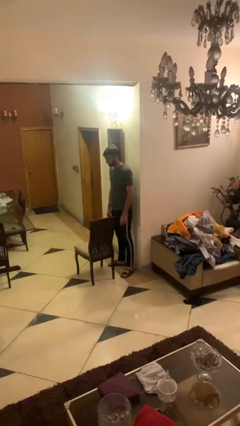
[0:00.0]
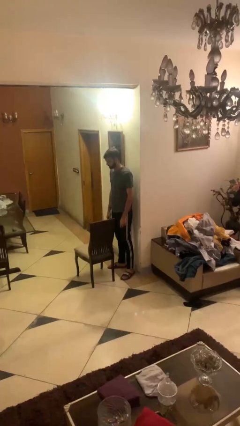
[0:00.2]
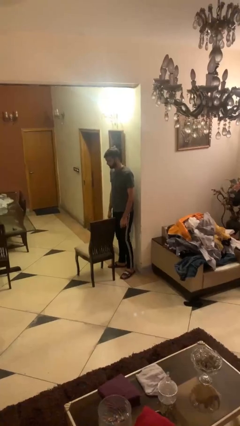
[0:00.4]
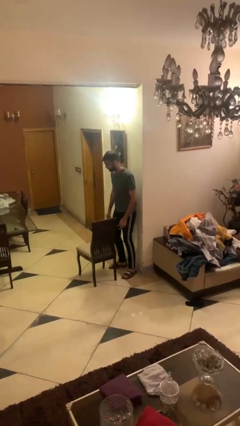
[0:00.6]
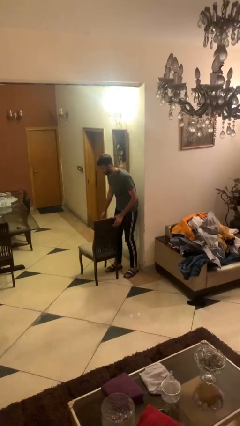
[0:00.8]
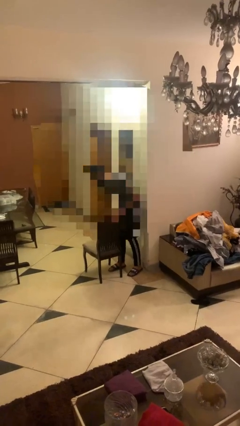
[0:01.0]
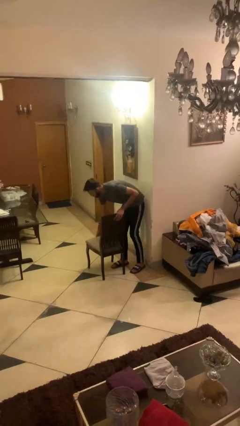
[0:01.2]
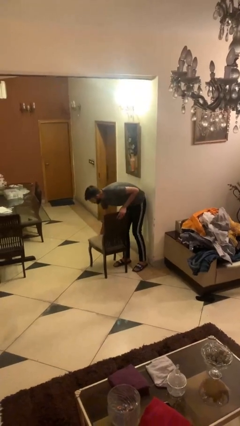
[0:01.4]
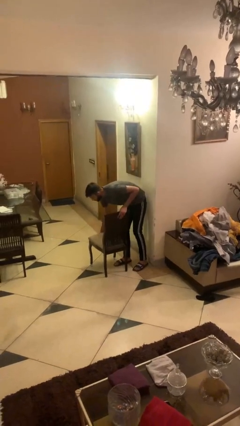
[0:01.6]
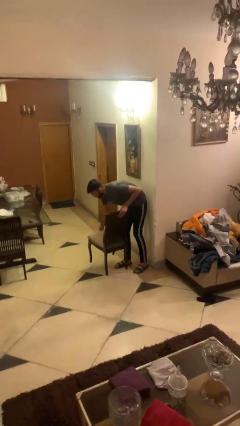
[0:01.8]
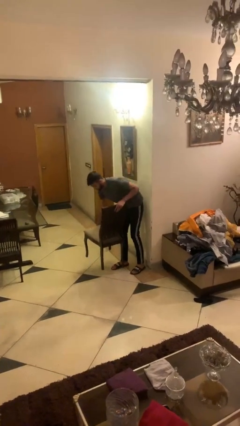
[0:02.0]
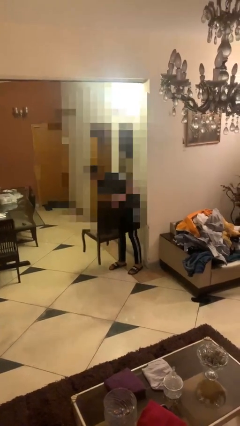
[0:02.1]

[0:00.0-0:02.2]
person picks up object from floor

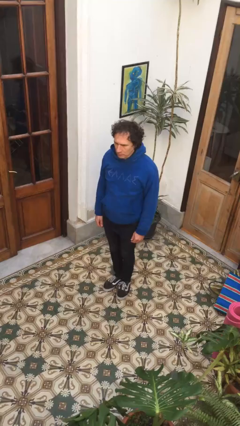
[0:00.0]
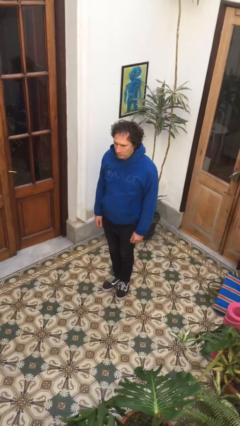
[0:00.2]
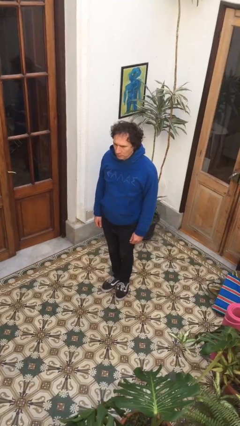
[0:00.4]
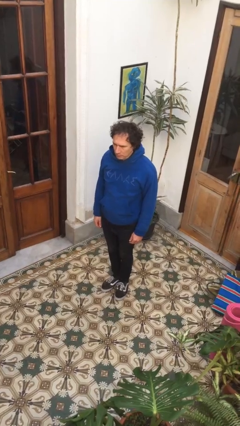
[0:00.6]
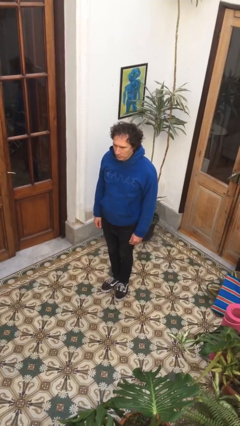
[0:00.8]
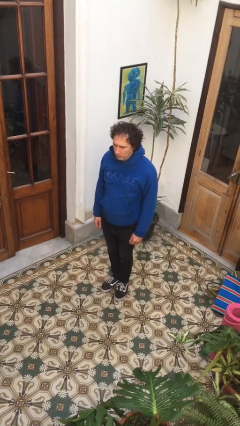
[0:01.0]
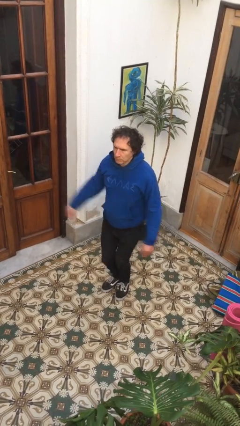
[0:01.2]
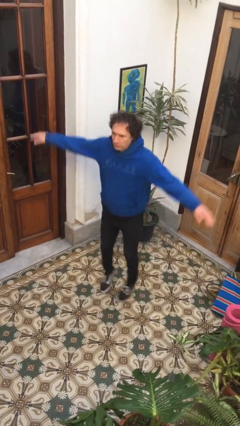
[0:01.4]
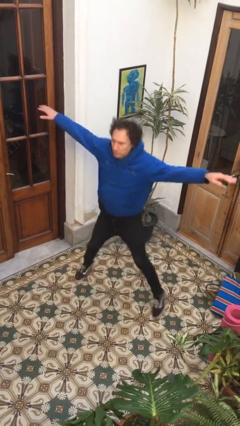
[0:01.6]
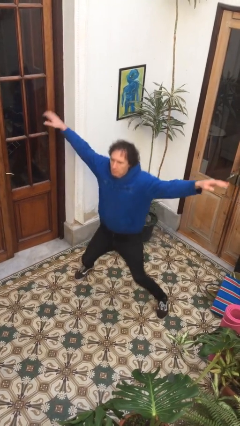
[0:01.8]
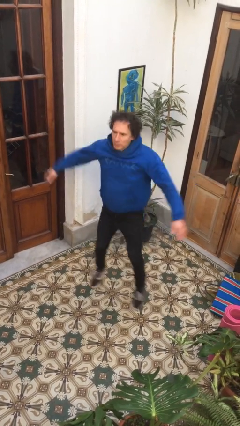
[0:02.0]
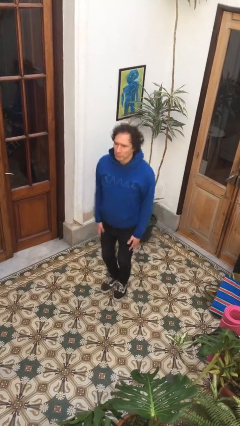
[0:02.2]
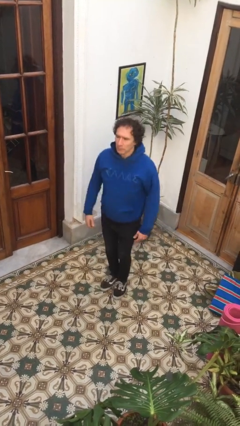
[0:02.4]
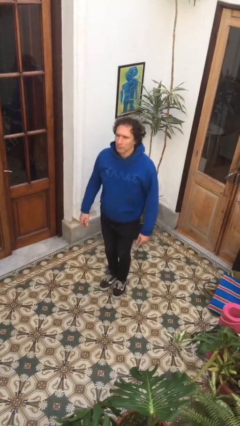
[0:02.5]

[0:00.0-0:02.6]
person exercises with jumping jacks

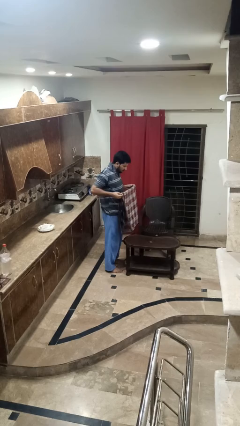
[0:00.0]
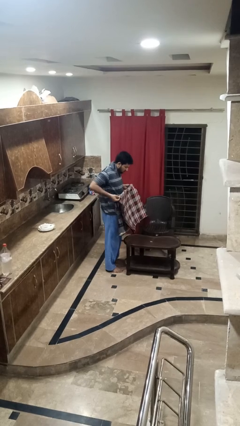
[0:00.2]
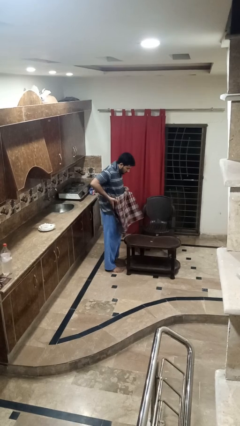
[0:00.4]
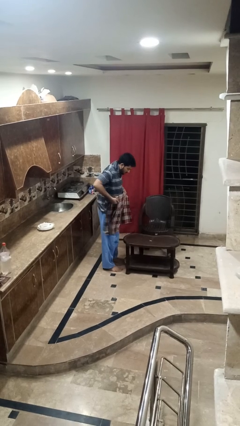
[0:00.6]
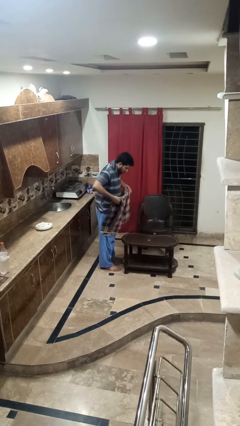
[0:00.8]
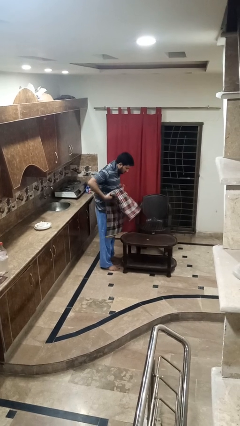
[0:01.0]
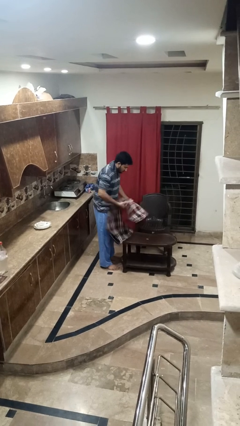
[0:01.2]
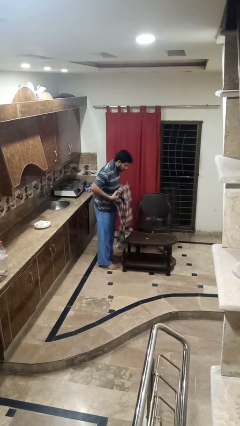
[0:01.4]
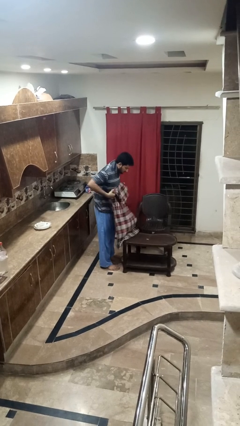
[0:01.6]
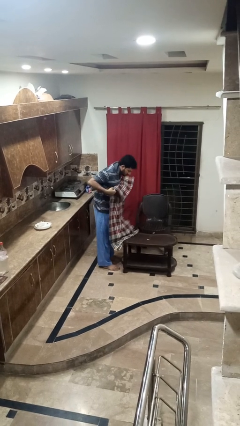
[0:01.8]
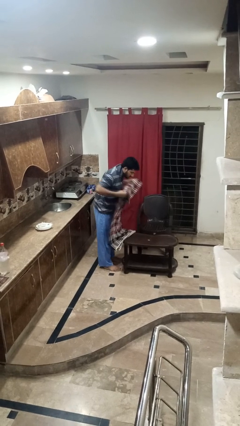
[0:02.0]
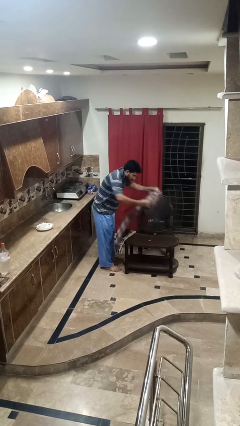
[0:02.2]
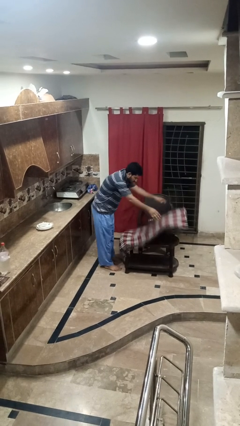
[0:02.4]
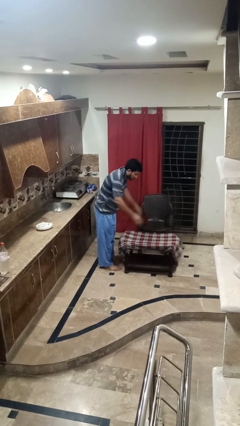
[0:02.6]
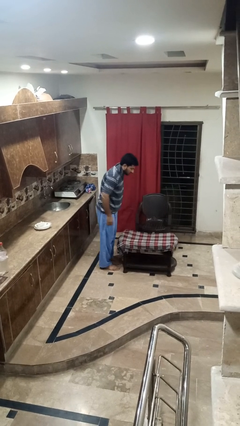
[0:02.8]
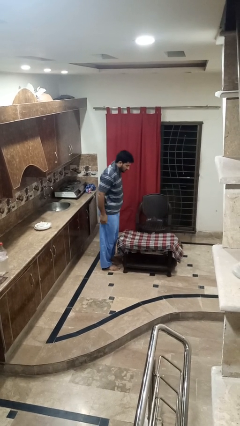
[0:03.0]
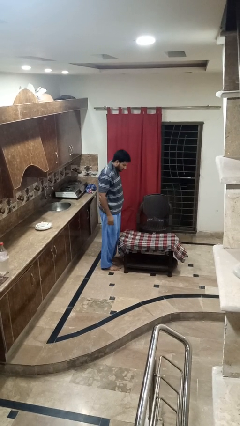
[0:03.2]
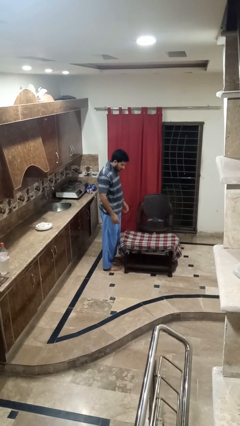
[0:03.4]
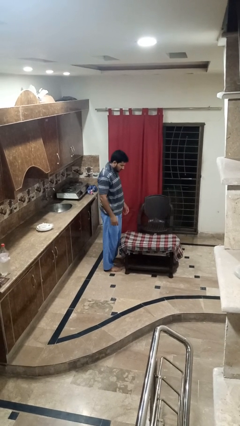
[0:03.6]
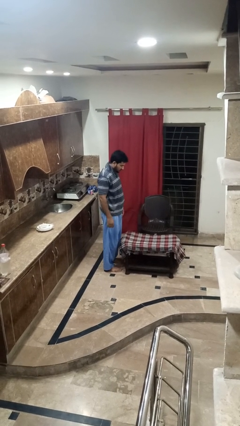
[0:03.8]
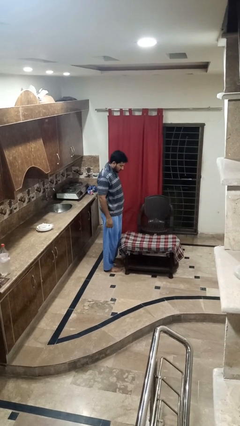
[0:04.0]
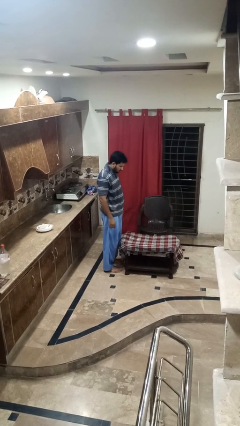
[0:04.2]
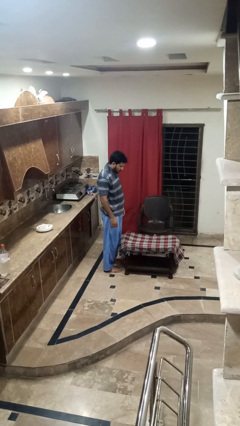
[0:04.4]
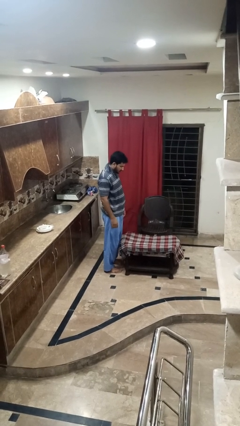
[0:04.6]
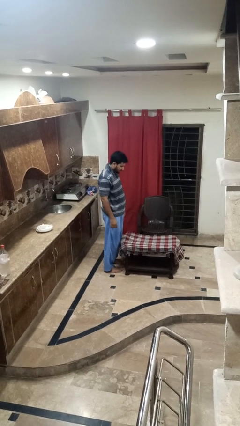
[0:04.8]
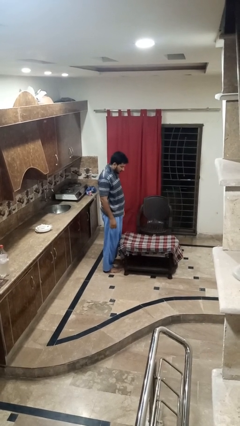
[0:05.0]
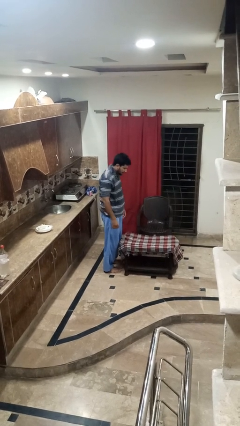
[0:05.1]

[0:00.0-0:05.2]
person spreads tablecloth

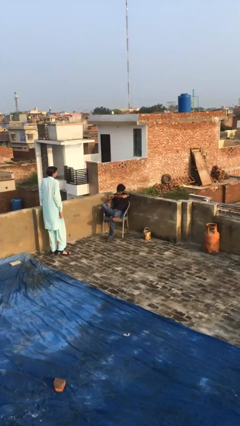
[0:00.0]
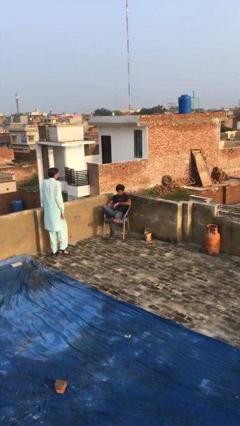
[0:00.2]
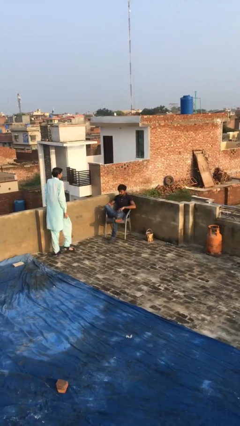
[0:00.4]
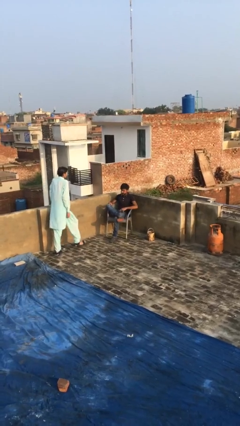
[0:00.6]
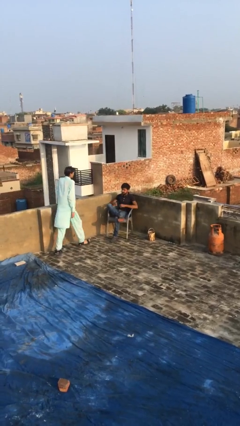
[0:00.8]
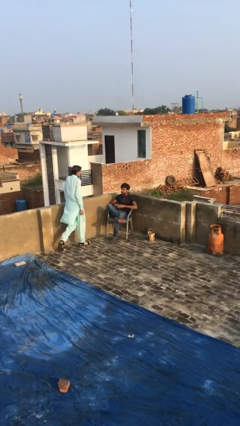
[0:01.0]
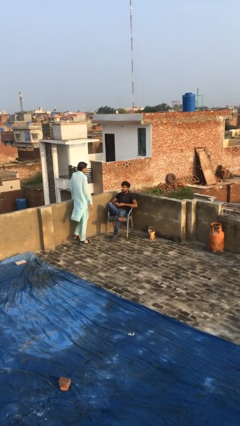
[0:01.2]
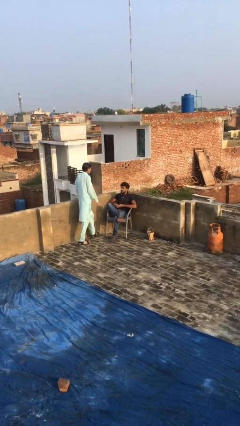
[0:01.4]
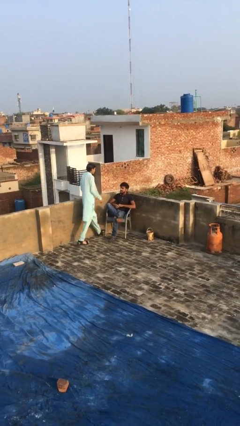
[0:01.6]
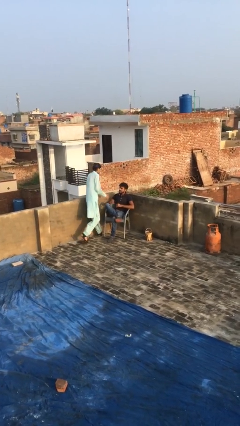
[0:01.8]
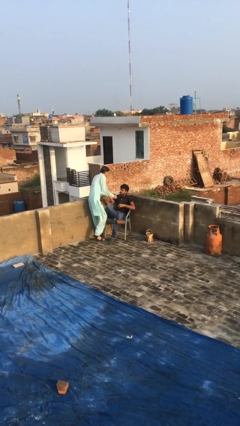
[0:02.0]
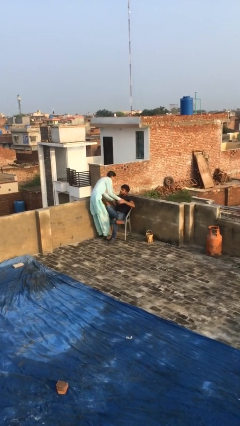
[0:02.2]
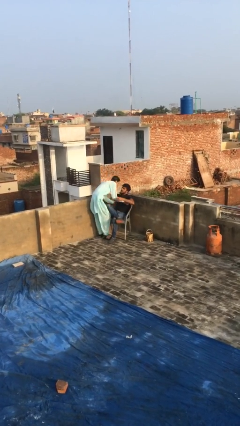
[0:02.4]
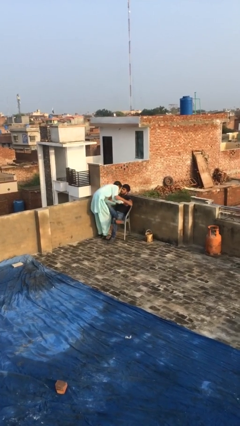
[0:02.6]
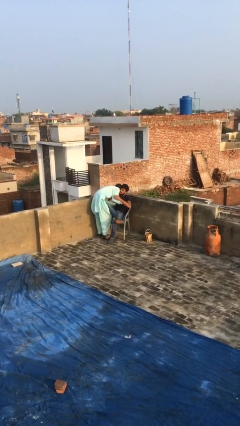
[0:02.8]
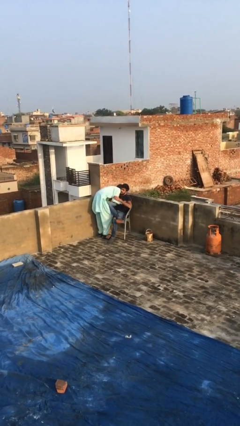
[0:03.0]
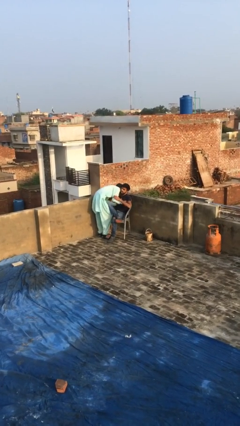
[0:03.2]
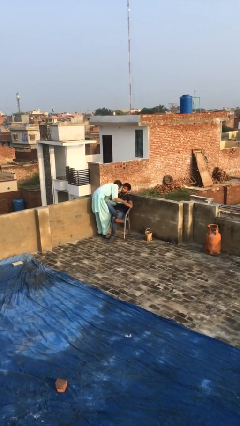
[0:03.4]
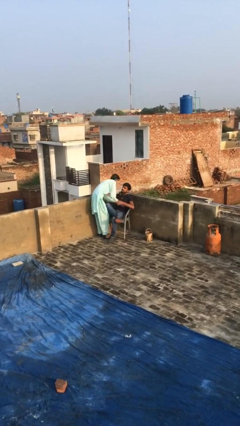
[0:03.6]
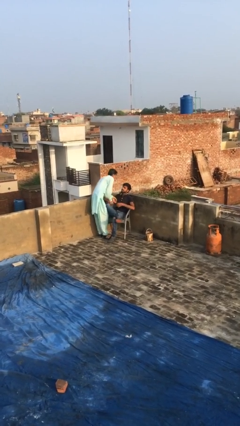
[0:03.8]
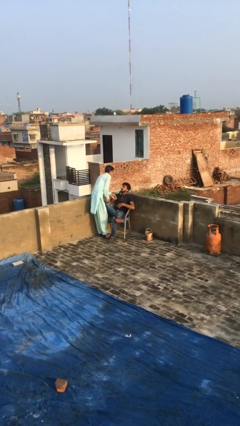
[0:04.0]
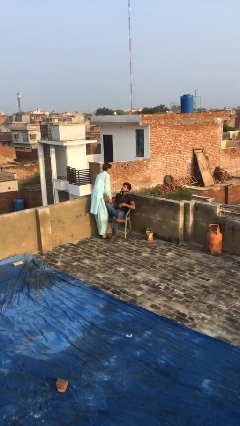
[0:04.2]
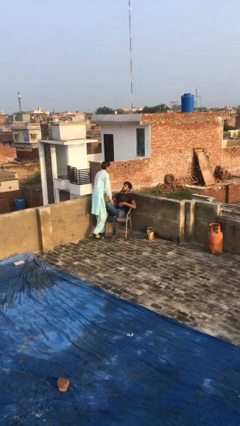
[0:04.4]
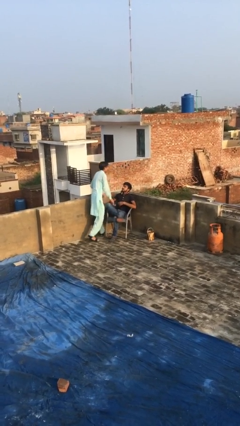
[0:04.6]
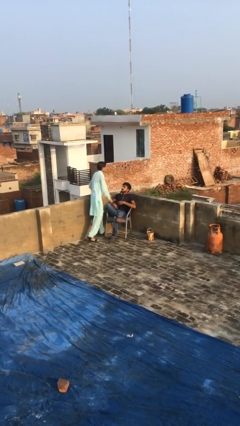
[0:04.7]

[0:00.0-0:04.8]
person embraces person

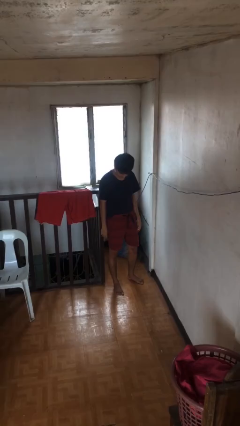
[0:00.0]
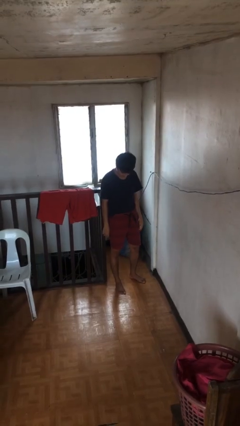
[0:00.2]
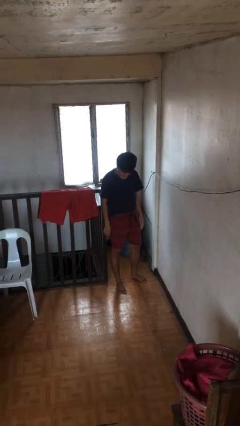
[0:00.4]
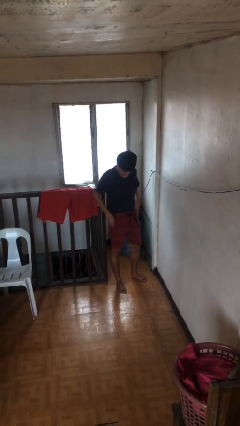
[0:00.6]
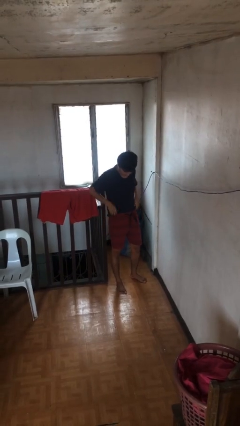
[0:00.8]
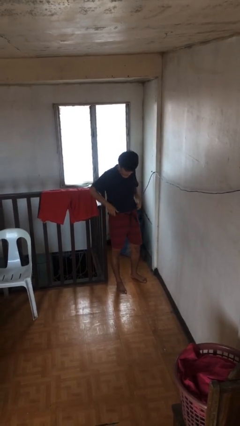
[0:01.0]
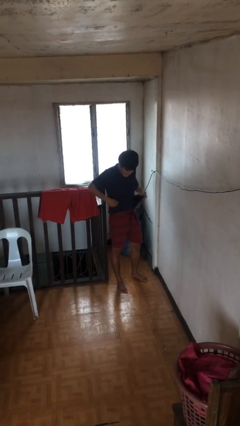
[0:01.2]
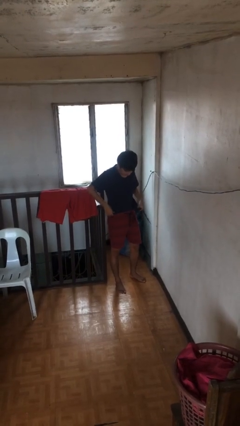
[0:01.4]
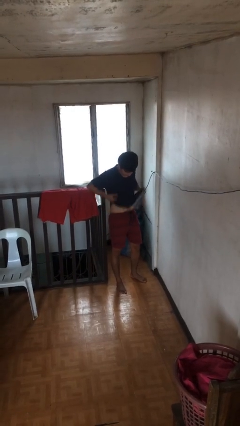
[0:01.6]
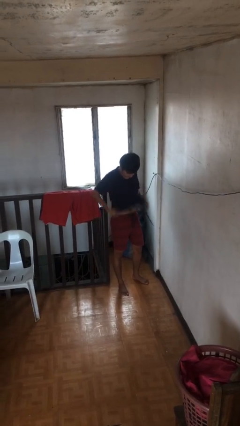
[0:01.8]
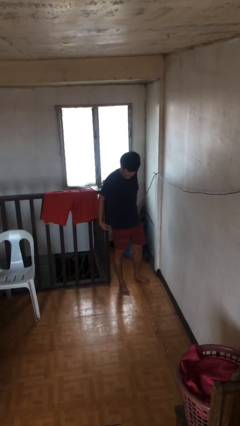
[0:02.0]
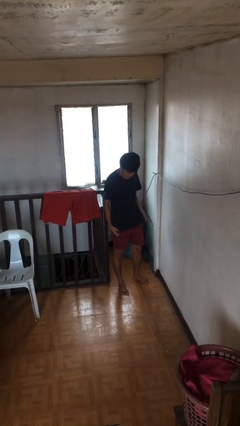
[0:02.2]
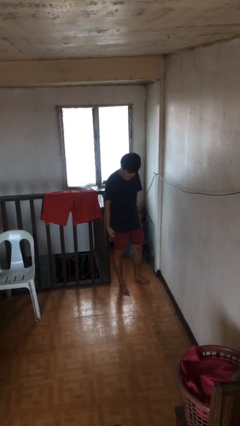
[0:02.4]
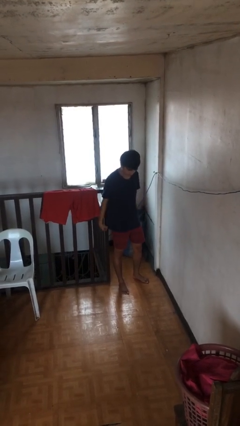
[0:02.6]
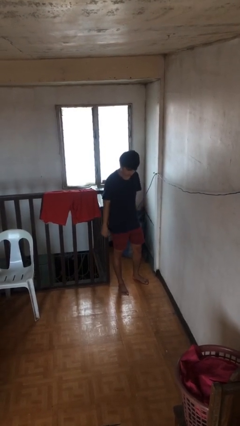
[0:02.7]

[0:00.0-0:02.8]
person untucks shirt
